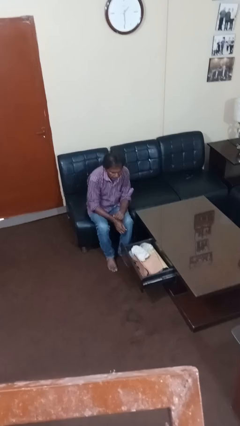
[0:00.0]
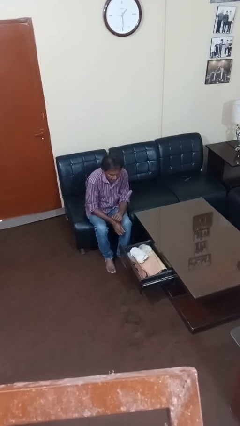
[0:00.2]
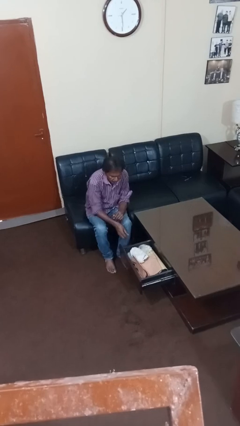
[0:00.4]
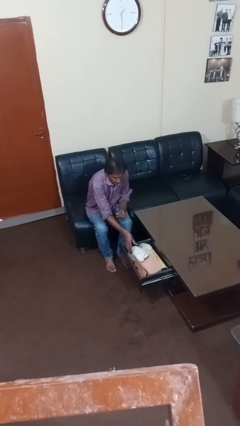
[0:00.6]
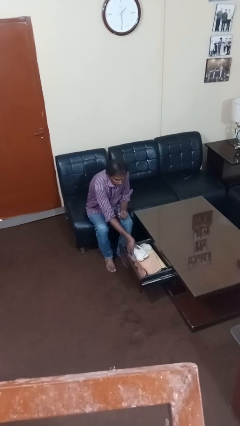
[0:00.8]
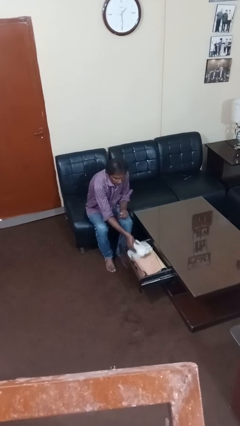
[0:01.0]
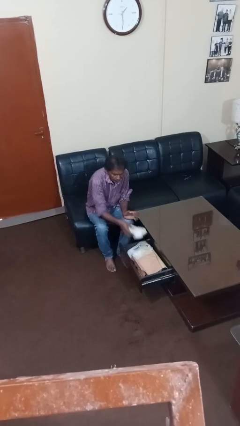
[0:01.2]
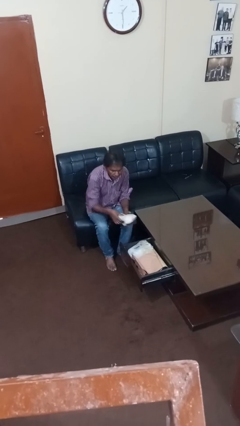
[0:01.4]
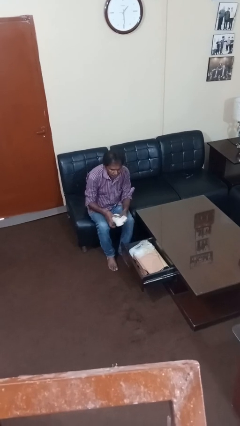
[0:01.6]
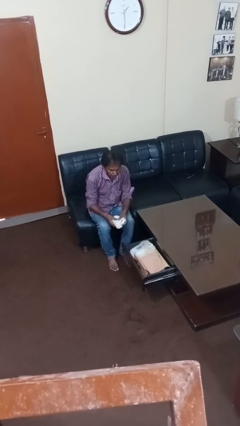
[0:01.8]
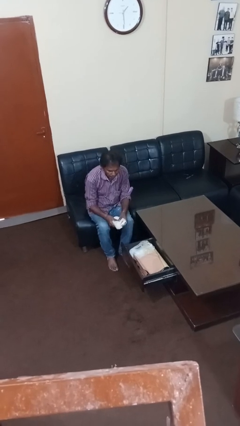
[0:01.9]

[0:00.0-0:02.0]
person takes clothes from dresser

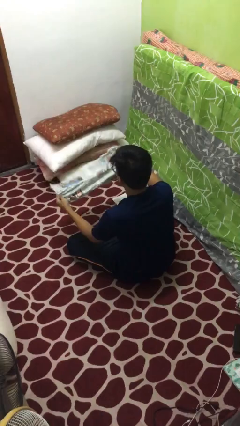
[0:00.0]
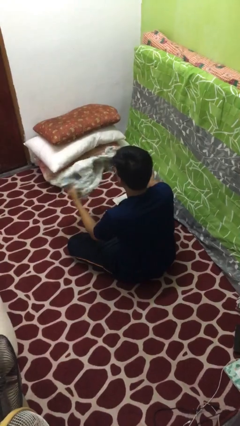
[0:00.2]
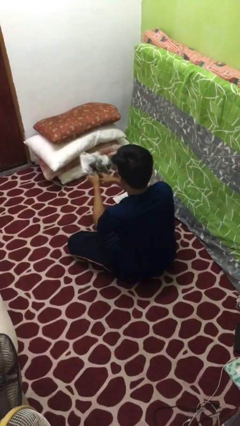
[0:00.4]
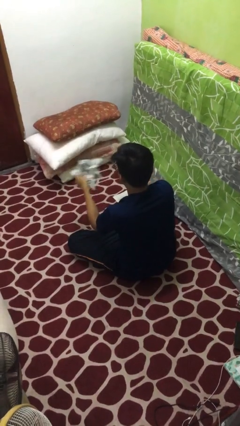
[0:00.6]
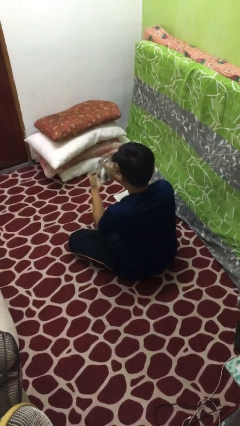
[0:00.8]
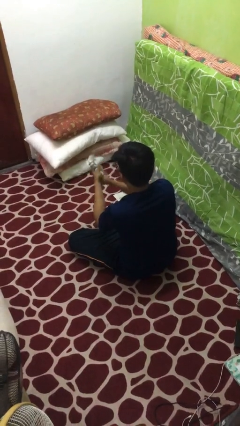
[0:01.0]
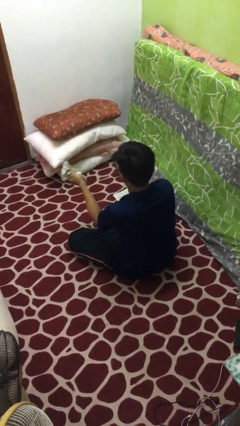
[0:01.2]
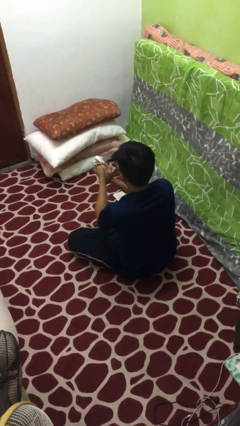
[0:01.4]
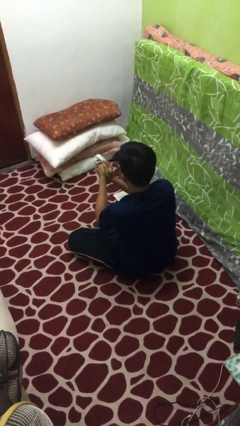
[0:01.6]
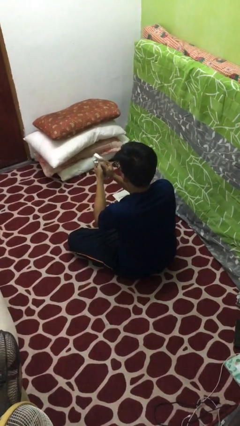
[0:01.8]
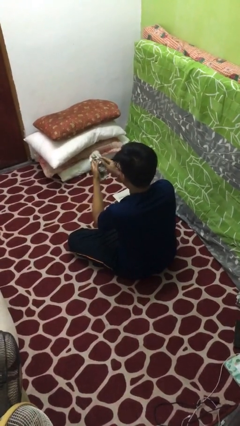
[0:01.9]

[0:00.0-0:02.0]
person crumples paper

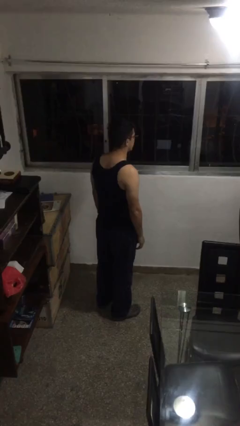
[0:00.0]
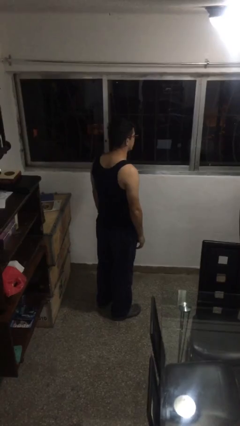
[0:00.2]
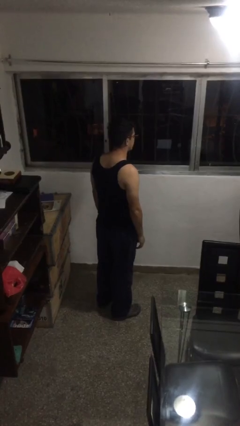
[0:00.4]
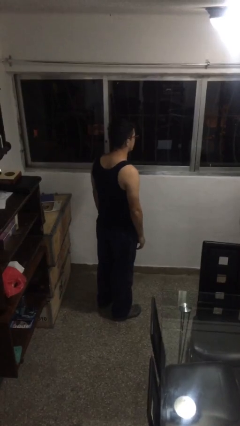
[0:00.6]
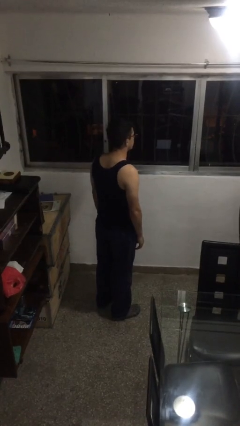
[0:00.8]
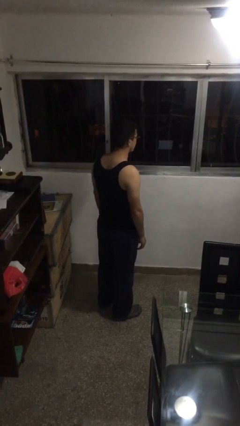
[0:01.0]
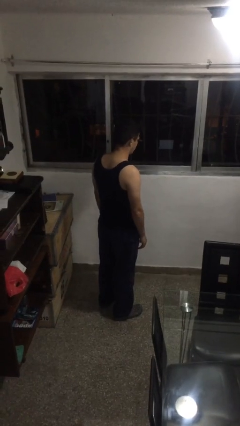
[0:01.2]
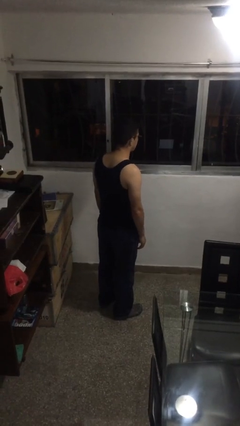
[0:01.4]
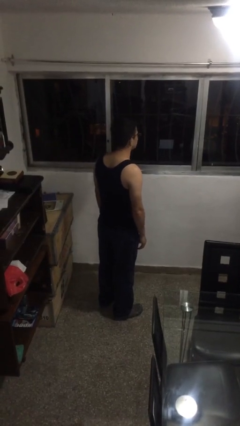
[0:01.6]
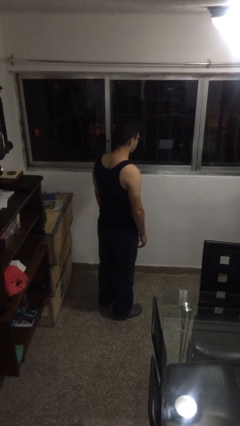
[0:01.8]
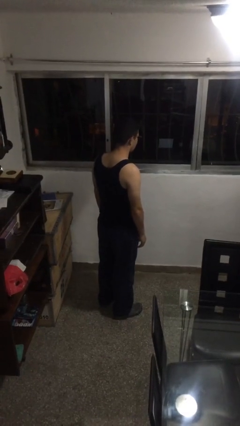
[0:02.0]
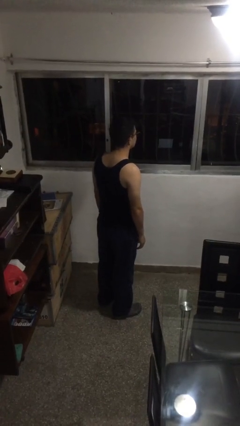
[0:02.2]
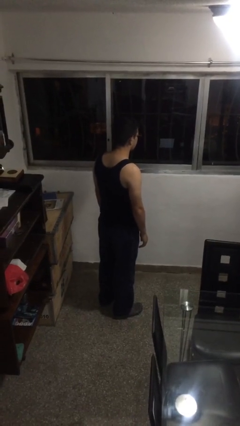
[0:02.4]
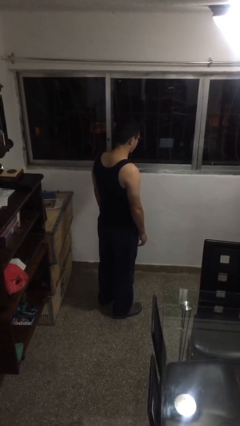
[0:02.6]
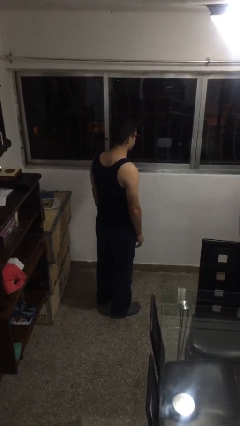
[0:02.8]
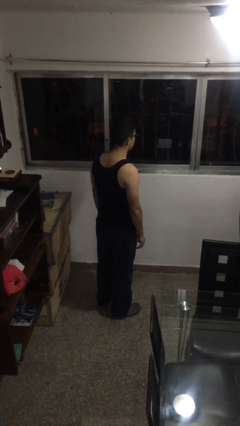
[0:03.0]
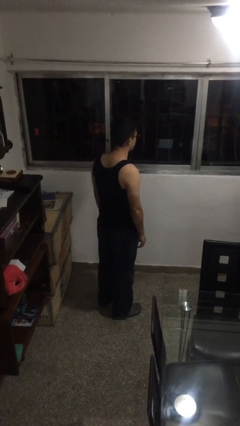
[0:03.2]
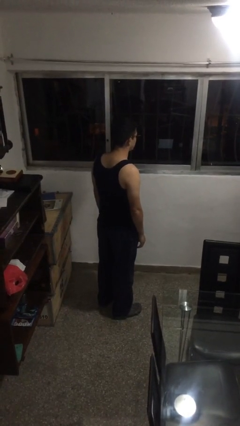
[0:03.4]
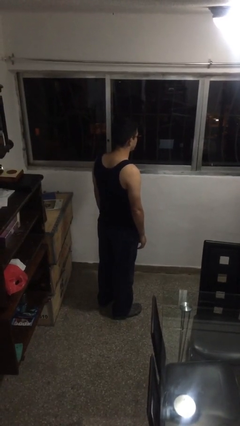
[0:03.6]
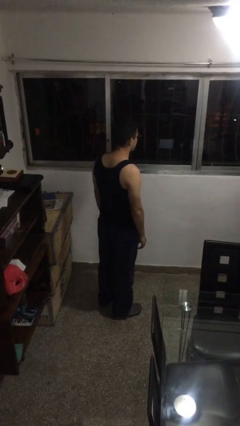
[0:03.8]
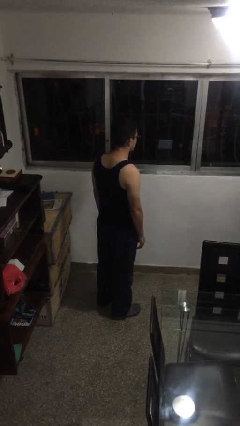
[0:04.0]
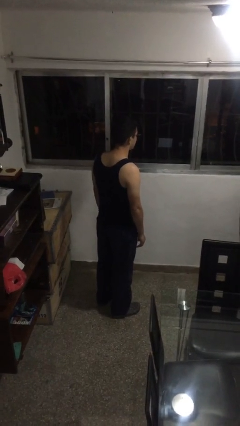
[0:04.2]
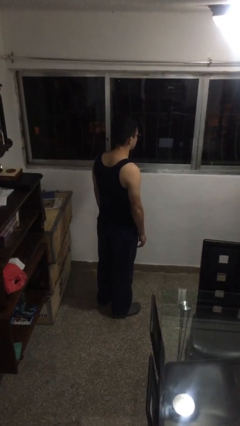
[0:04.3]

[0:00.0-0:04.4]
person nods head

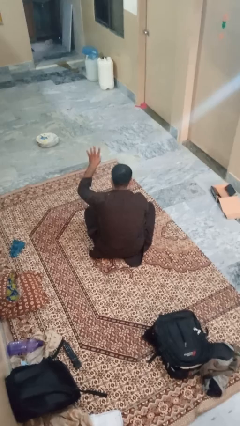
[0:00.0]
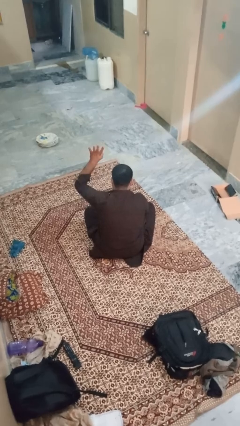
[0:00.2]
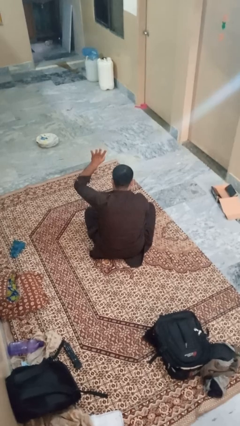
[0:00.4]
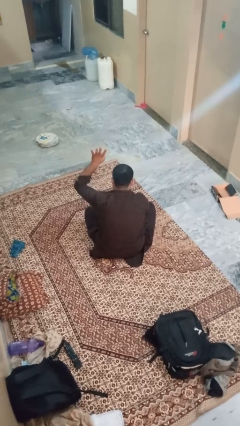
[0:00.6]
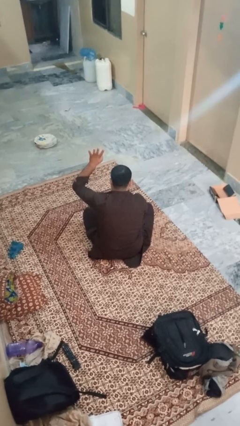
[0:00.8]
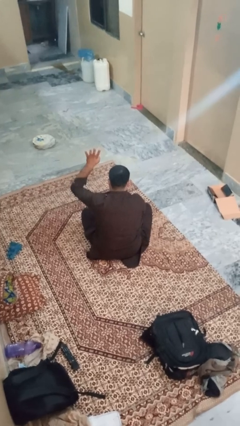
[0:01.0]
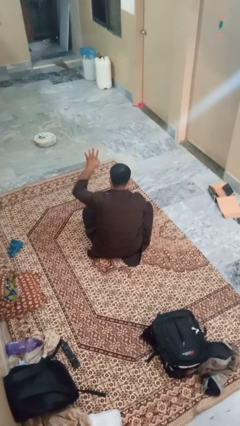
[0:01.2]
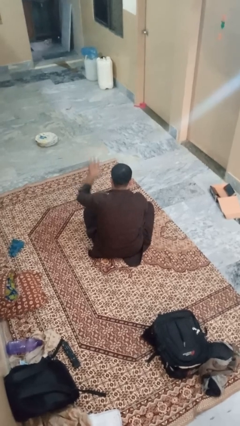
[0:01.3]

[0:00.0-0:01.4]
person gestures number four

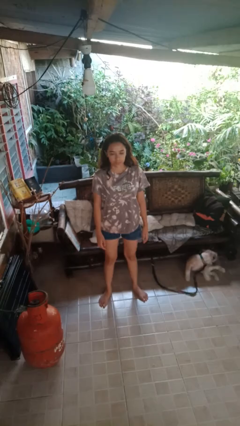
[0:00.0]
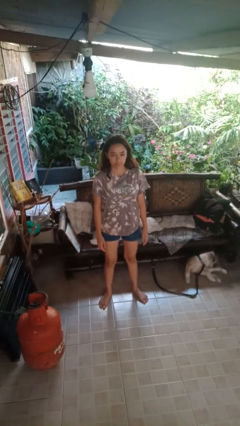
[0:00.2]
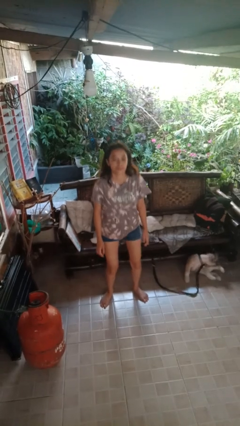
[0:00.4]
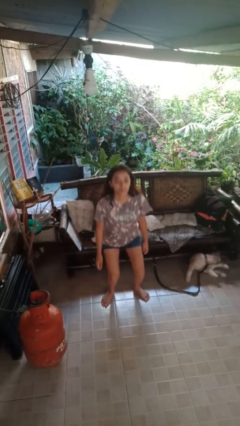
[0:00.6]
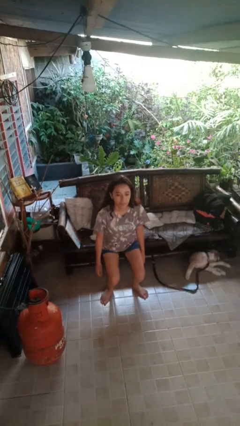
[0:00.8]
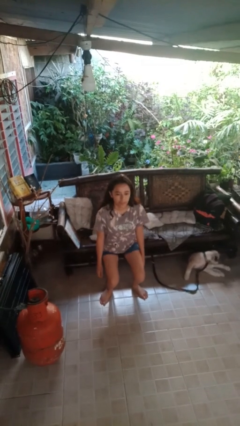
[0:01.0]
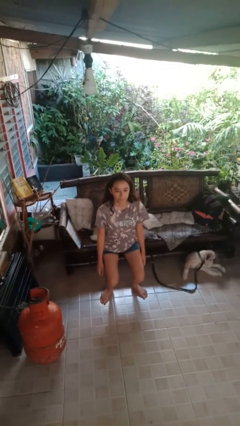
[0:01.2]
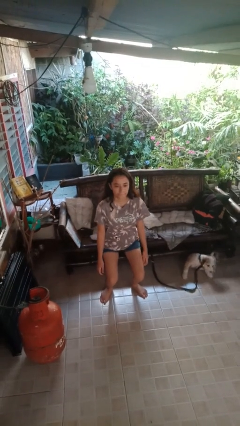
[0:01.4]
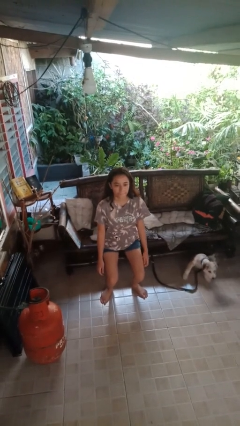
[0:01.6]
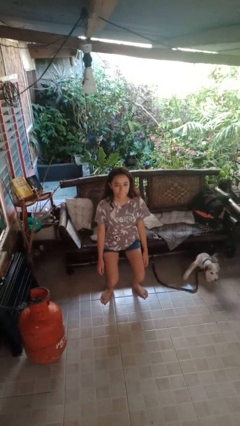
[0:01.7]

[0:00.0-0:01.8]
person squats

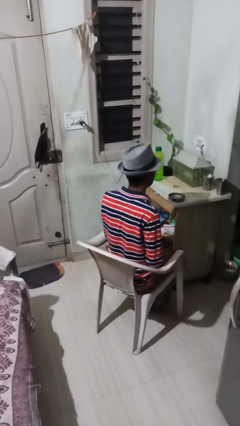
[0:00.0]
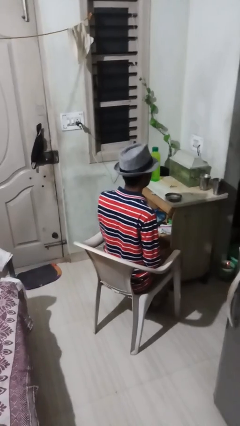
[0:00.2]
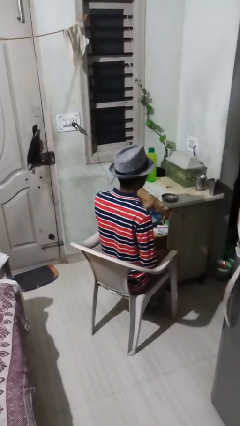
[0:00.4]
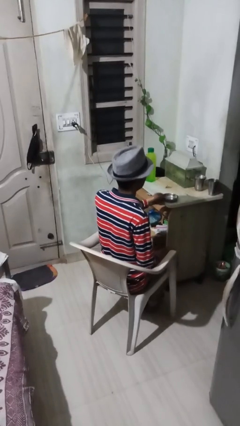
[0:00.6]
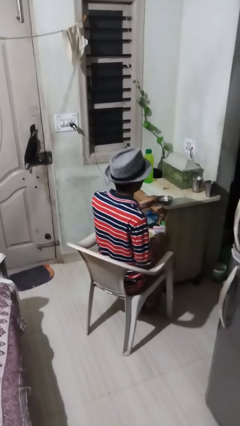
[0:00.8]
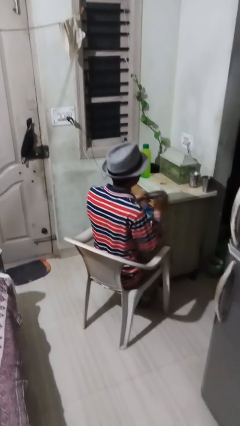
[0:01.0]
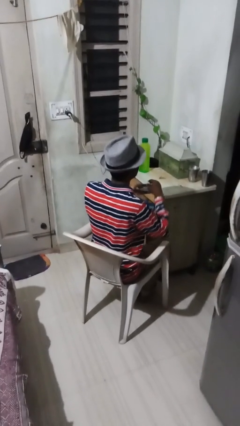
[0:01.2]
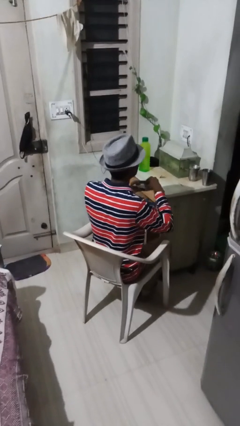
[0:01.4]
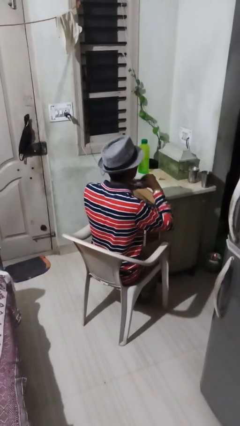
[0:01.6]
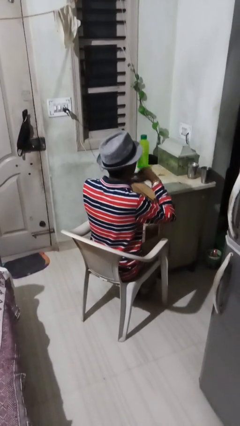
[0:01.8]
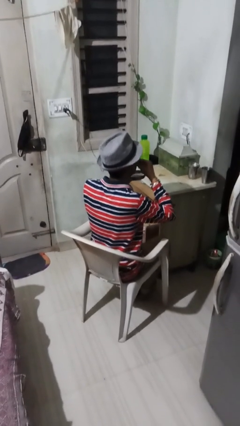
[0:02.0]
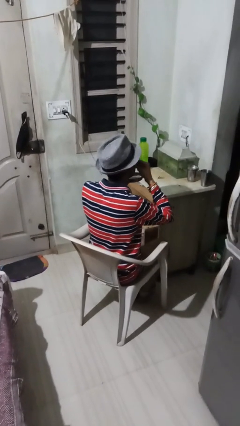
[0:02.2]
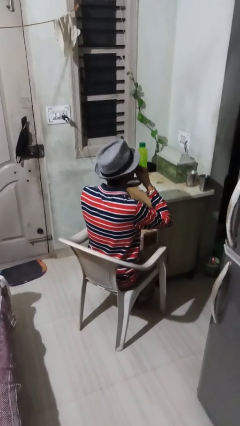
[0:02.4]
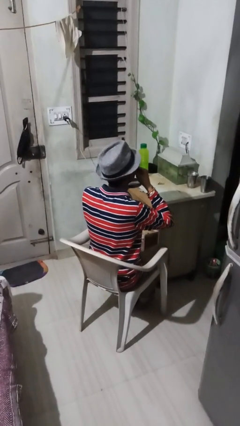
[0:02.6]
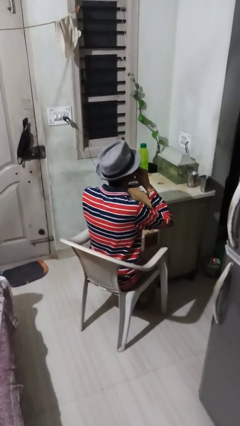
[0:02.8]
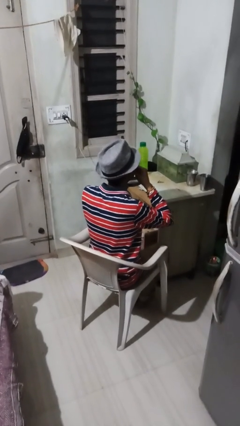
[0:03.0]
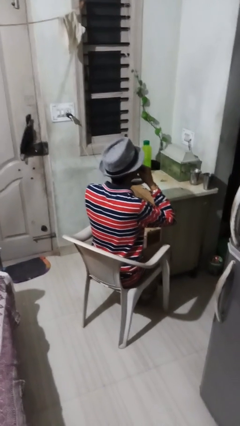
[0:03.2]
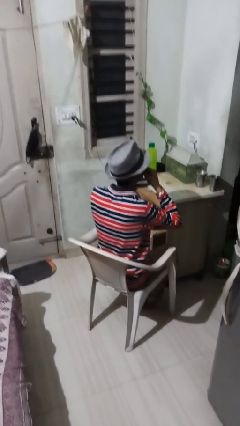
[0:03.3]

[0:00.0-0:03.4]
person eats with hands

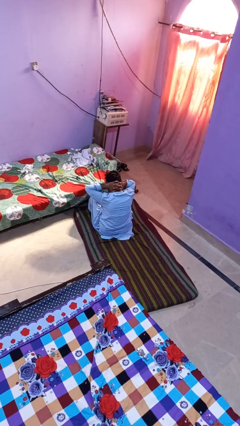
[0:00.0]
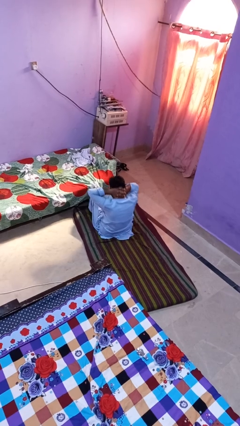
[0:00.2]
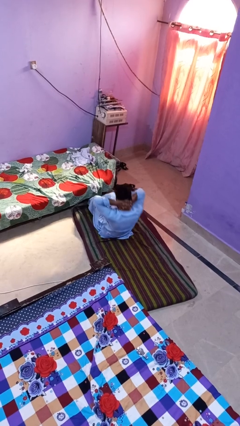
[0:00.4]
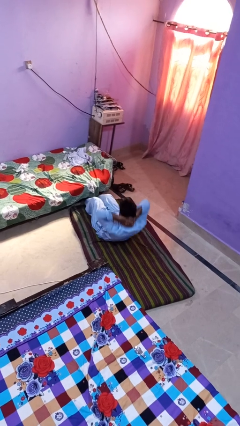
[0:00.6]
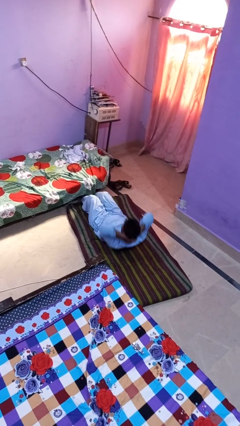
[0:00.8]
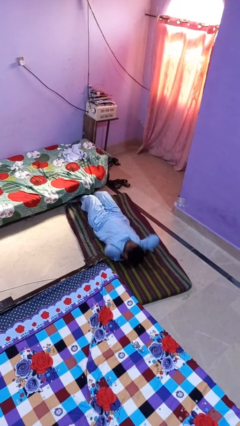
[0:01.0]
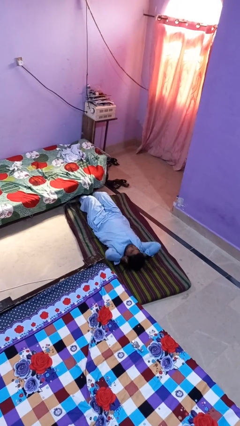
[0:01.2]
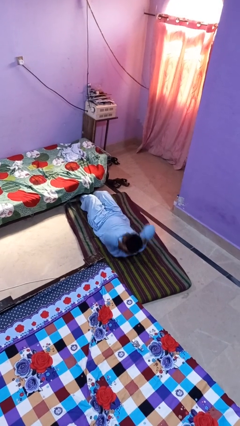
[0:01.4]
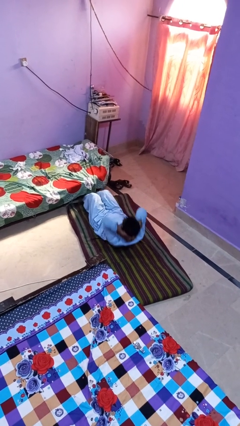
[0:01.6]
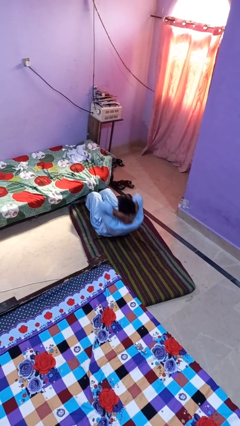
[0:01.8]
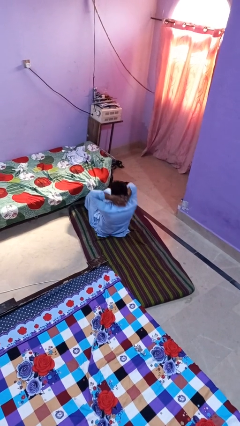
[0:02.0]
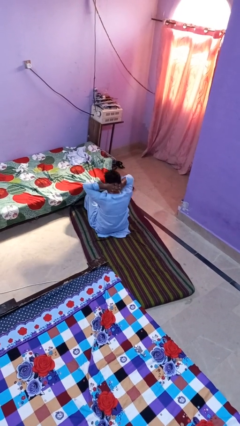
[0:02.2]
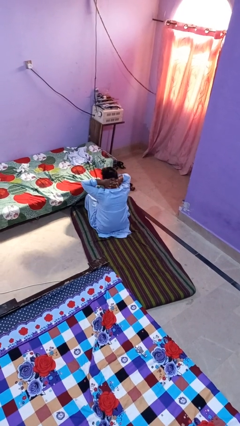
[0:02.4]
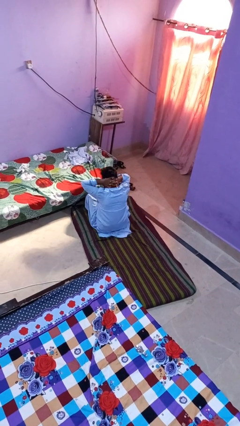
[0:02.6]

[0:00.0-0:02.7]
person exercises with situp
